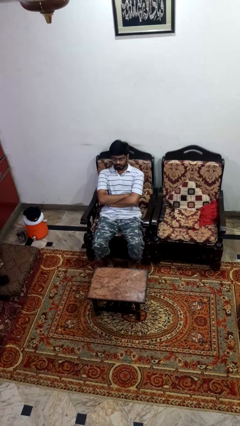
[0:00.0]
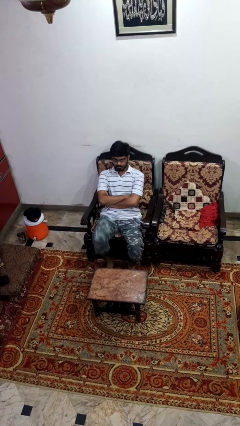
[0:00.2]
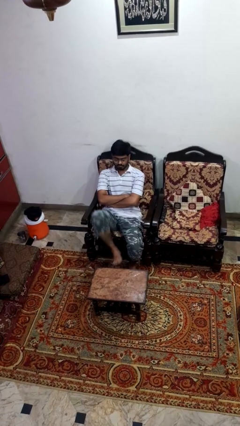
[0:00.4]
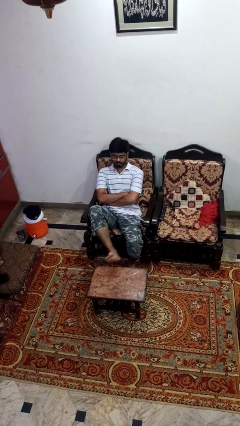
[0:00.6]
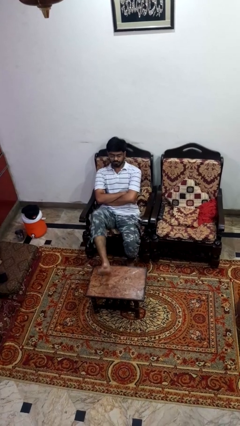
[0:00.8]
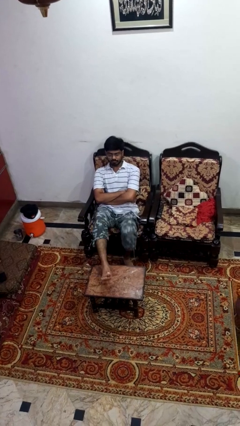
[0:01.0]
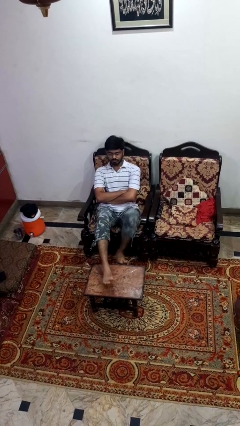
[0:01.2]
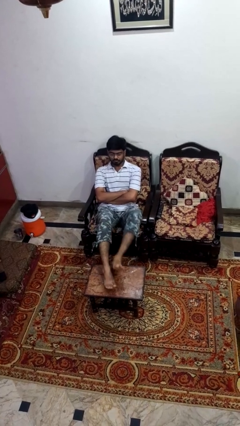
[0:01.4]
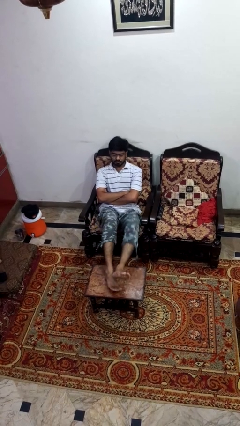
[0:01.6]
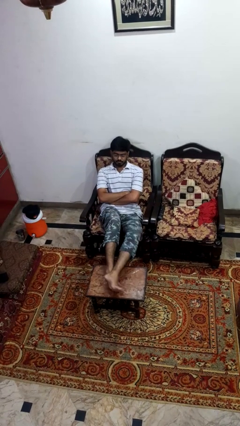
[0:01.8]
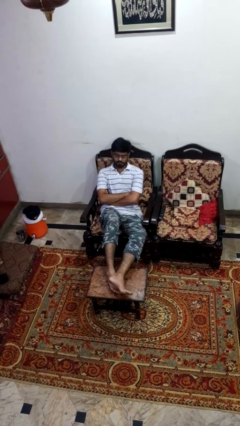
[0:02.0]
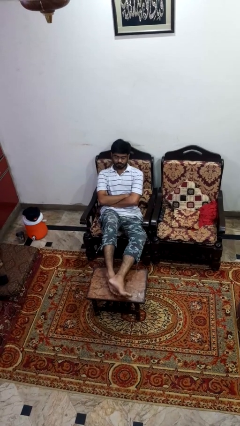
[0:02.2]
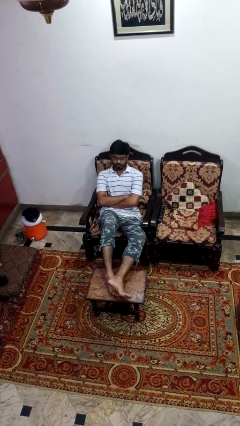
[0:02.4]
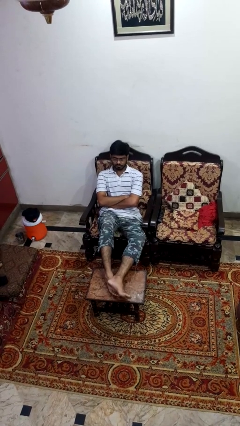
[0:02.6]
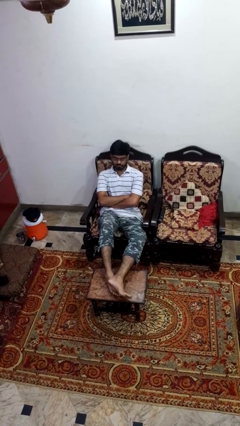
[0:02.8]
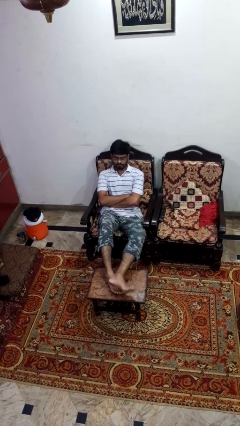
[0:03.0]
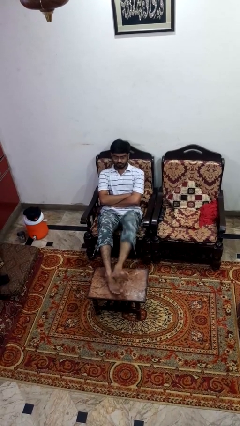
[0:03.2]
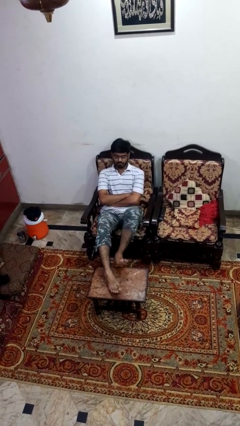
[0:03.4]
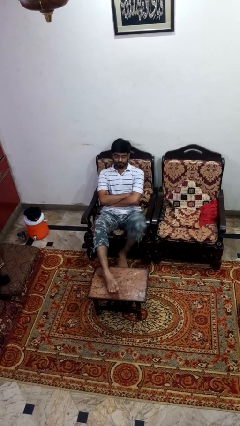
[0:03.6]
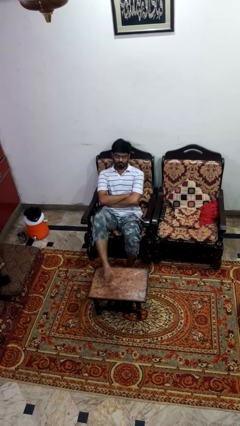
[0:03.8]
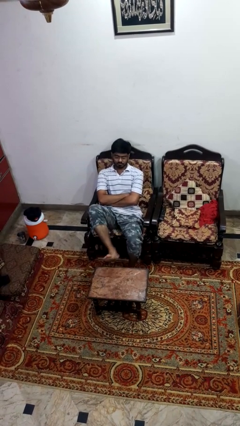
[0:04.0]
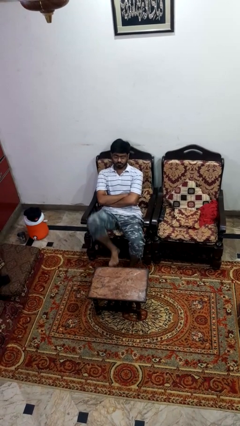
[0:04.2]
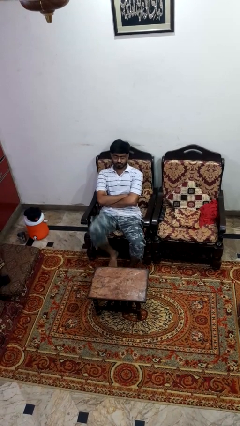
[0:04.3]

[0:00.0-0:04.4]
person puts feet up

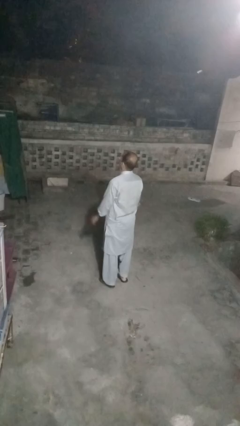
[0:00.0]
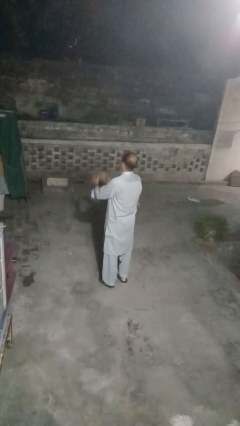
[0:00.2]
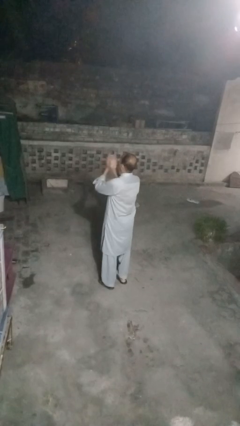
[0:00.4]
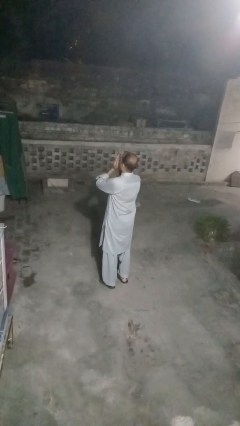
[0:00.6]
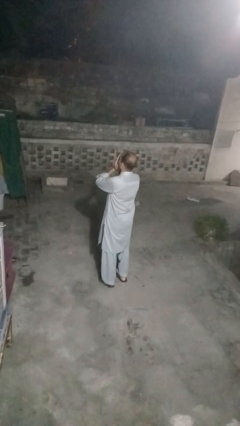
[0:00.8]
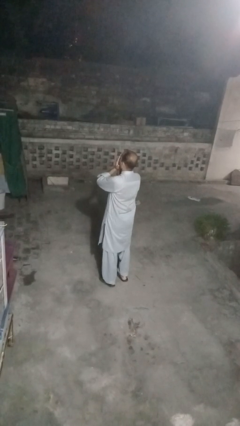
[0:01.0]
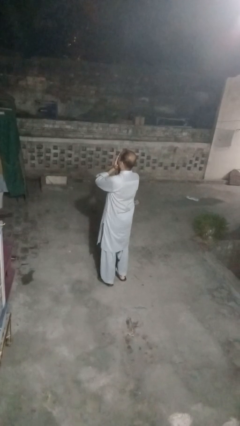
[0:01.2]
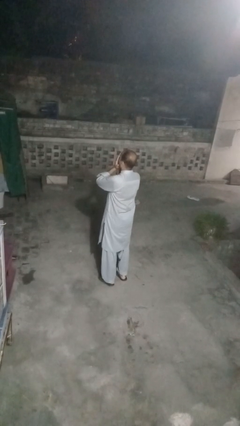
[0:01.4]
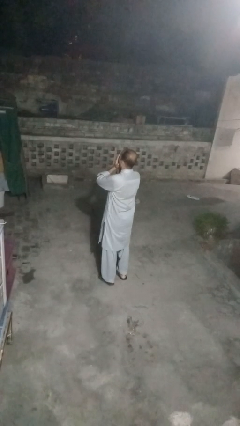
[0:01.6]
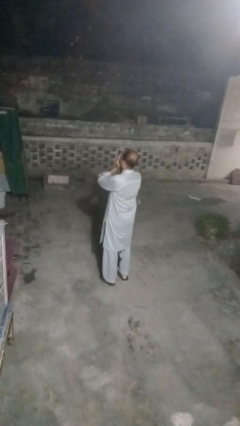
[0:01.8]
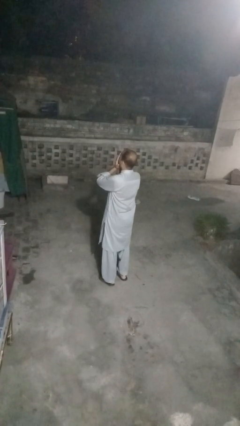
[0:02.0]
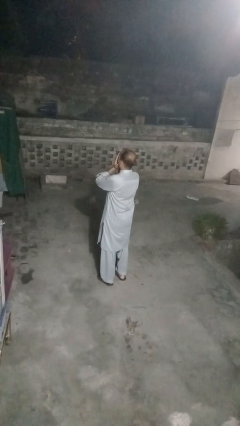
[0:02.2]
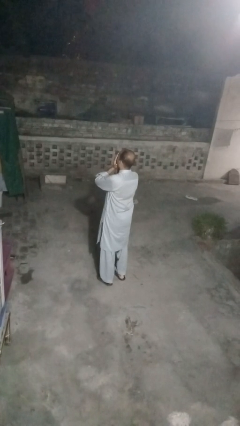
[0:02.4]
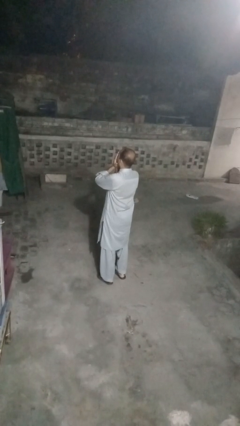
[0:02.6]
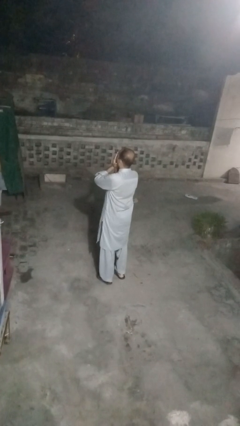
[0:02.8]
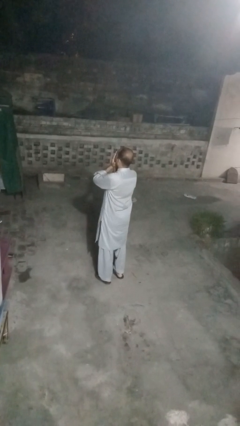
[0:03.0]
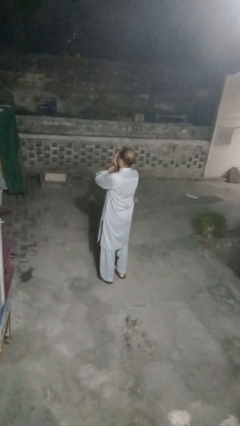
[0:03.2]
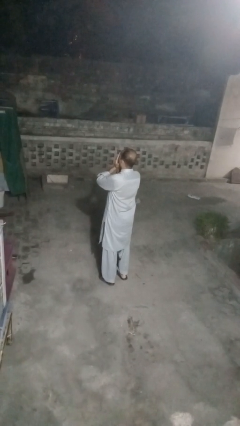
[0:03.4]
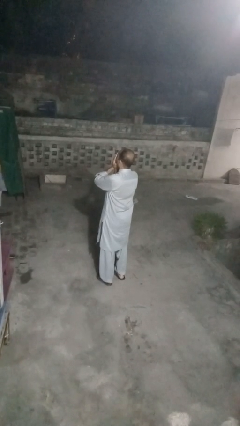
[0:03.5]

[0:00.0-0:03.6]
person covers face with hands

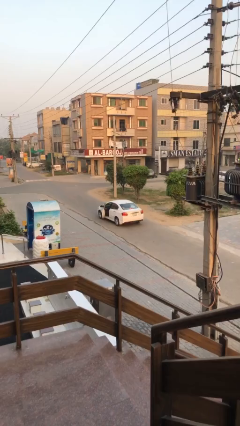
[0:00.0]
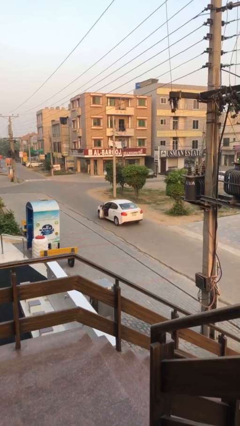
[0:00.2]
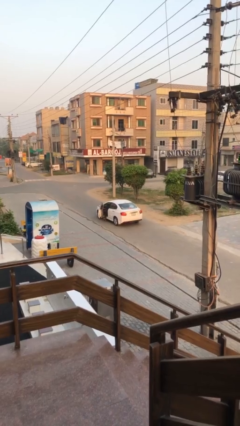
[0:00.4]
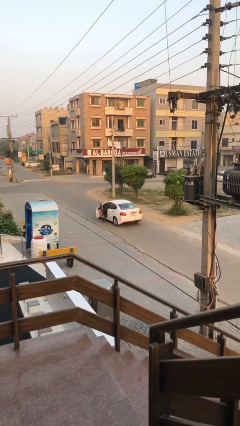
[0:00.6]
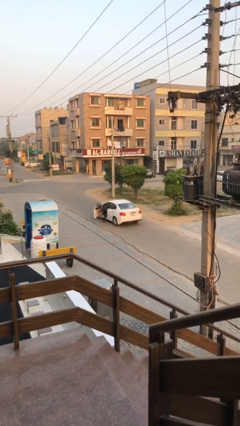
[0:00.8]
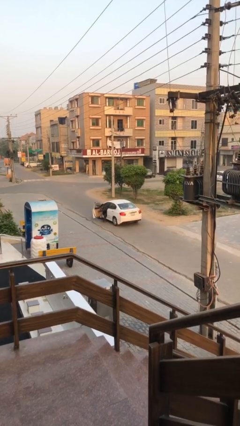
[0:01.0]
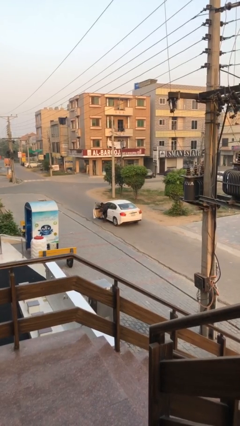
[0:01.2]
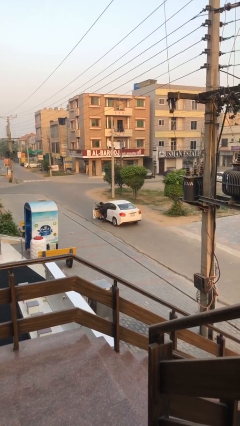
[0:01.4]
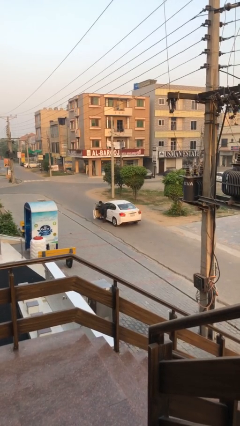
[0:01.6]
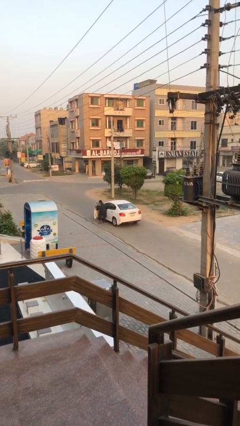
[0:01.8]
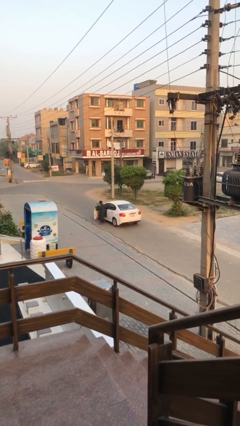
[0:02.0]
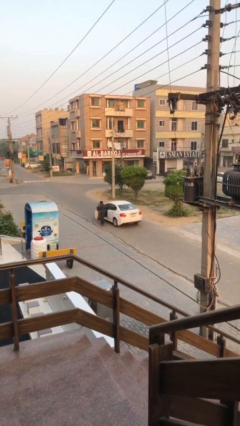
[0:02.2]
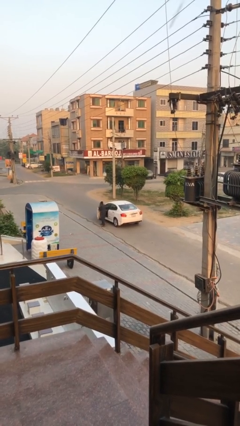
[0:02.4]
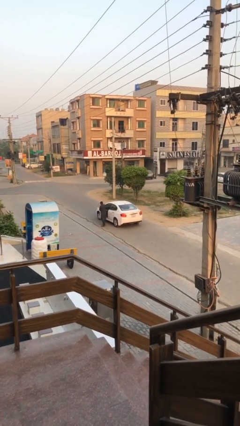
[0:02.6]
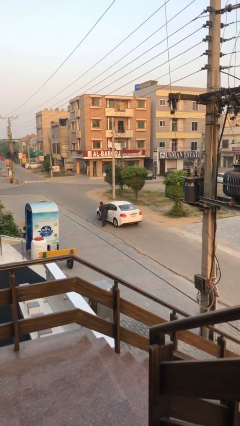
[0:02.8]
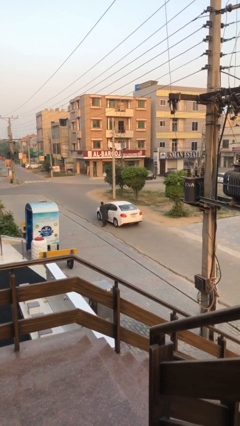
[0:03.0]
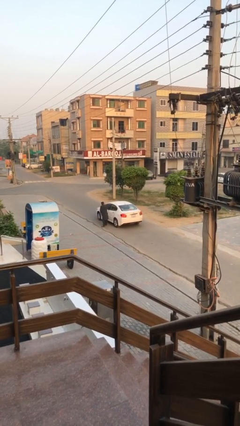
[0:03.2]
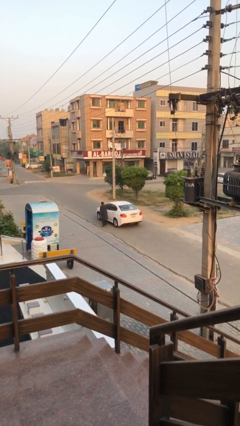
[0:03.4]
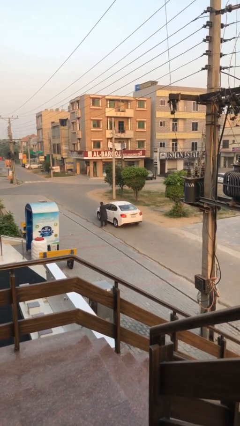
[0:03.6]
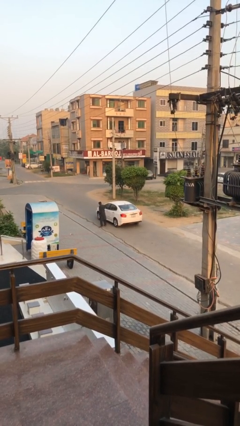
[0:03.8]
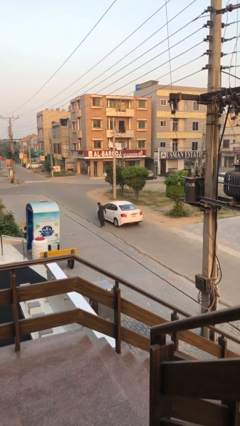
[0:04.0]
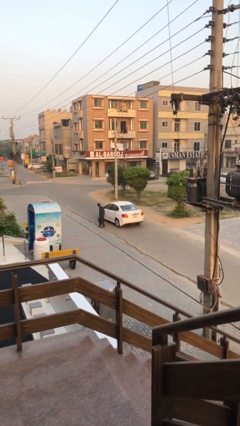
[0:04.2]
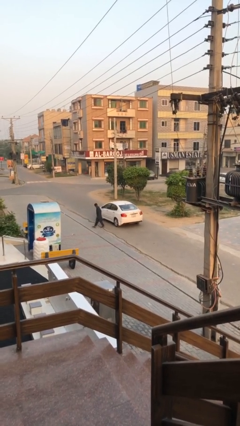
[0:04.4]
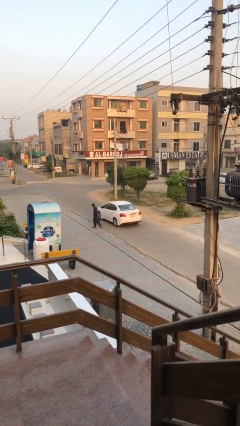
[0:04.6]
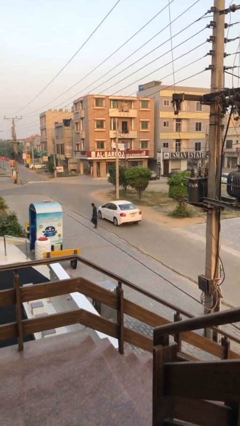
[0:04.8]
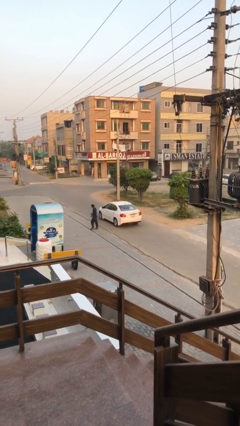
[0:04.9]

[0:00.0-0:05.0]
car drops off person

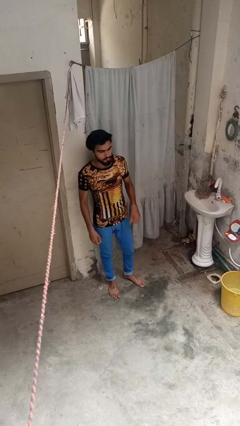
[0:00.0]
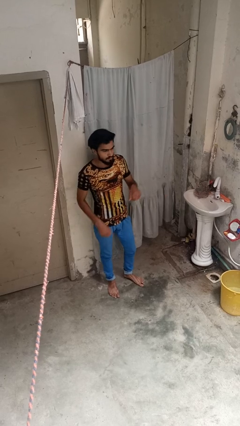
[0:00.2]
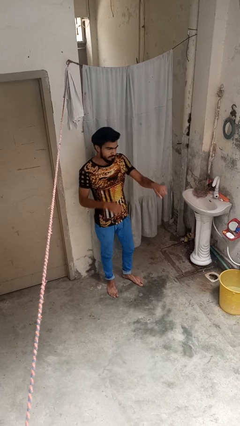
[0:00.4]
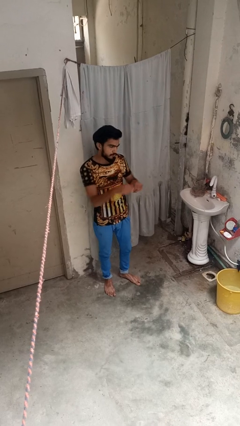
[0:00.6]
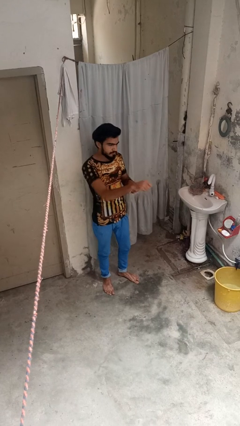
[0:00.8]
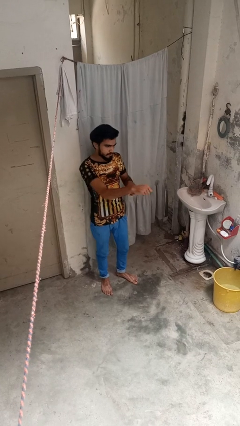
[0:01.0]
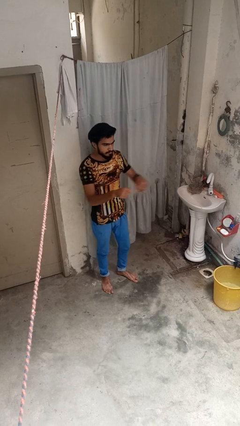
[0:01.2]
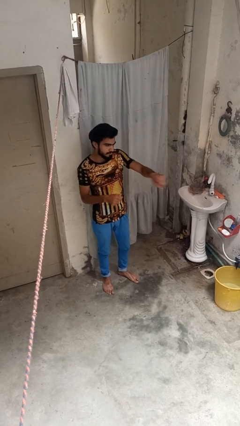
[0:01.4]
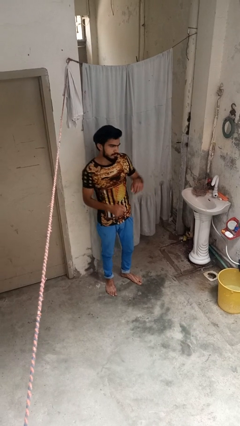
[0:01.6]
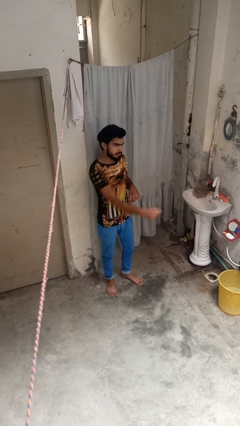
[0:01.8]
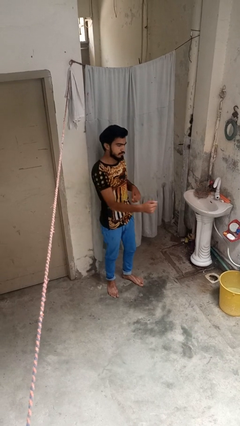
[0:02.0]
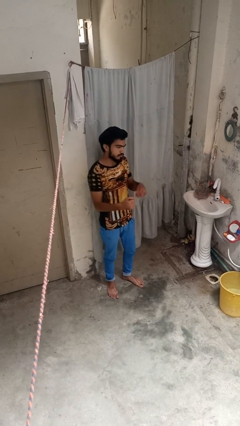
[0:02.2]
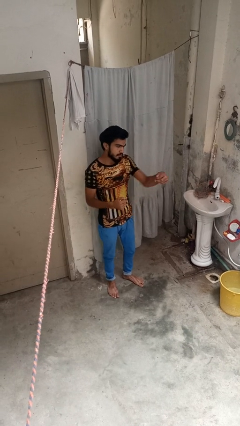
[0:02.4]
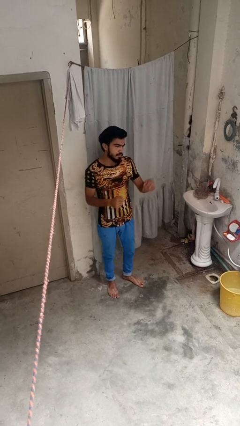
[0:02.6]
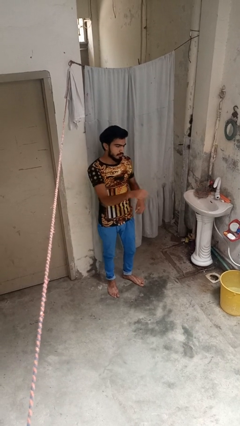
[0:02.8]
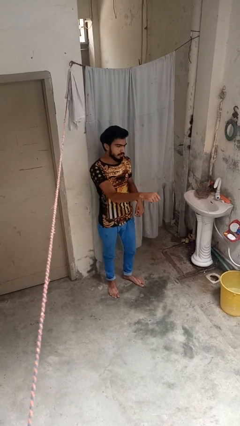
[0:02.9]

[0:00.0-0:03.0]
person punches

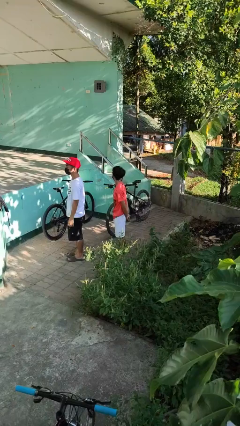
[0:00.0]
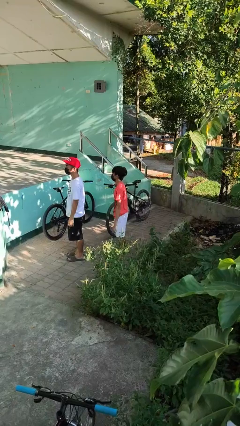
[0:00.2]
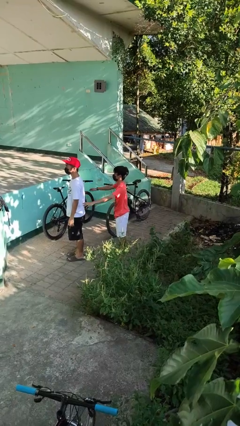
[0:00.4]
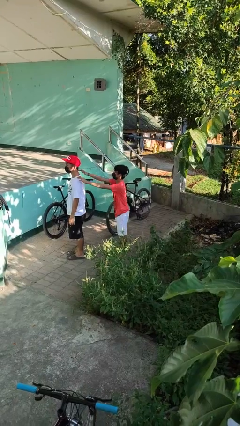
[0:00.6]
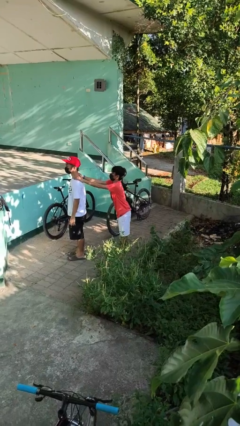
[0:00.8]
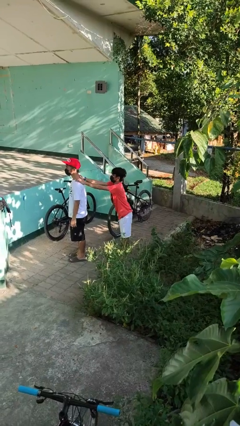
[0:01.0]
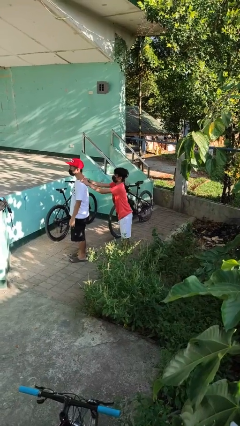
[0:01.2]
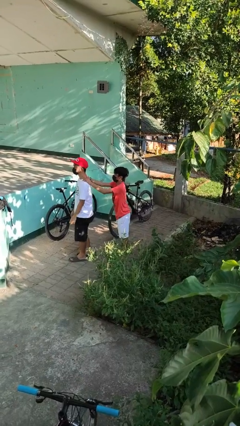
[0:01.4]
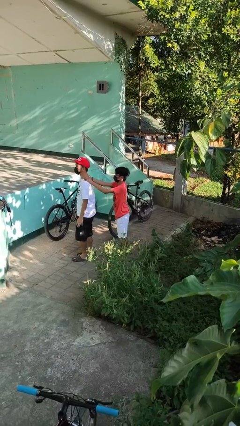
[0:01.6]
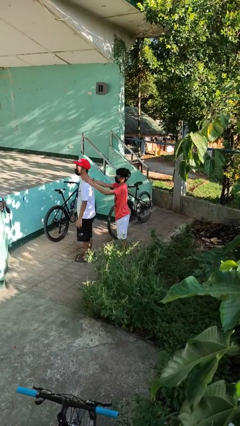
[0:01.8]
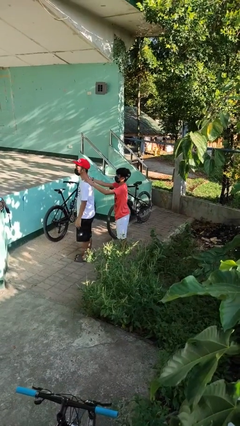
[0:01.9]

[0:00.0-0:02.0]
person grabs person by shoulder
